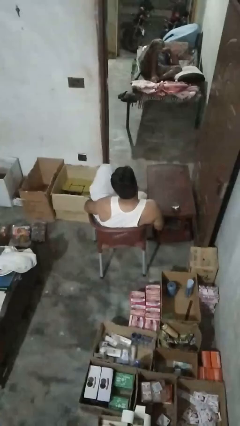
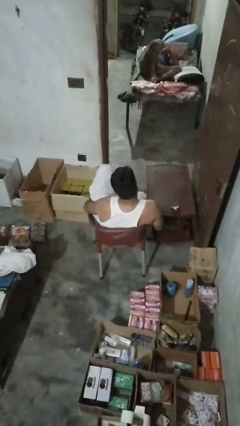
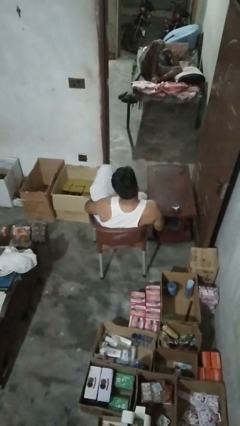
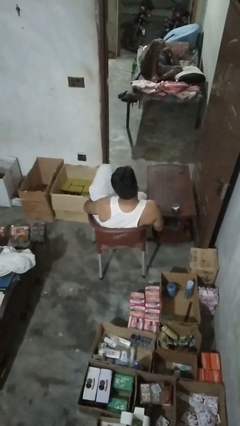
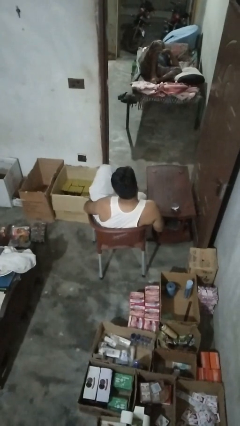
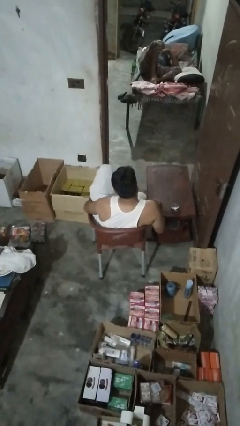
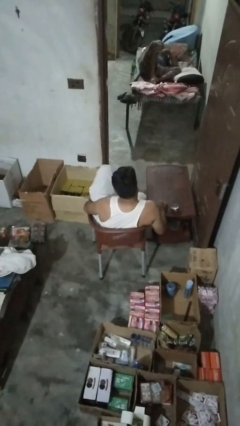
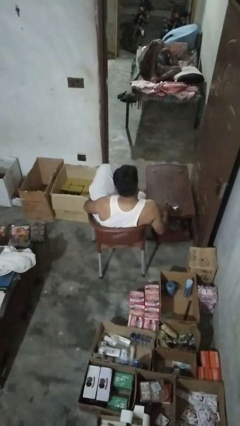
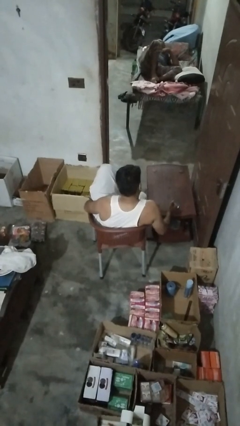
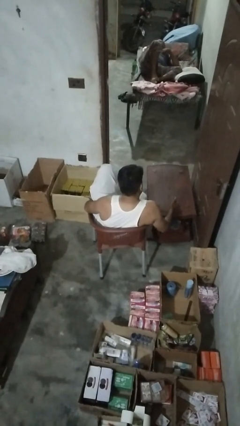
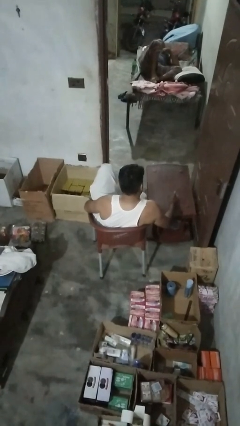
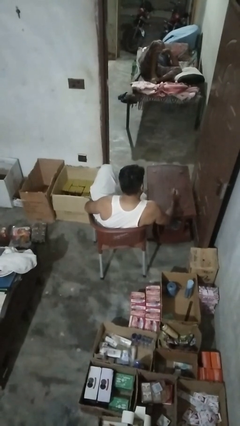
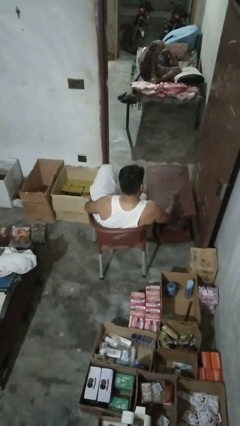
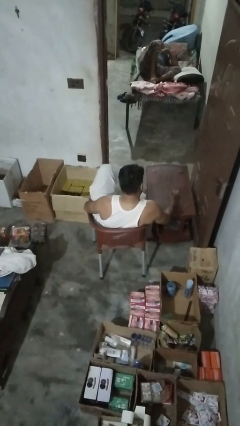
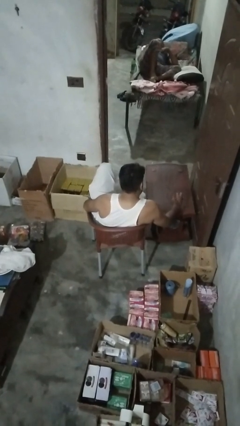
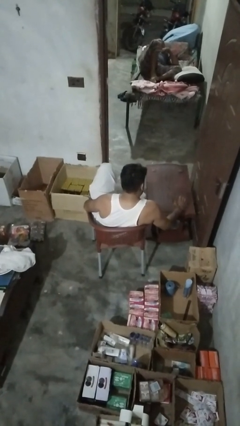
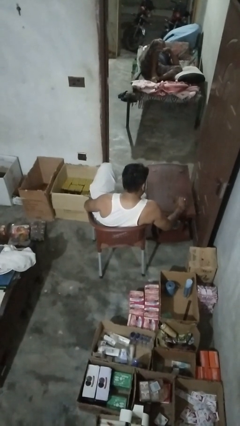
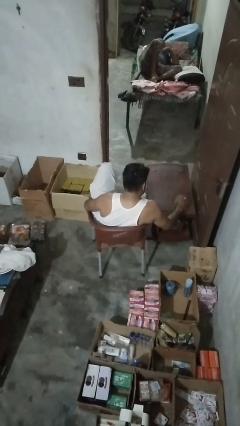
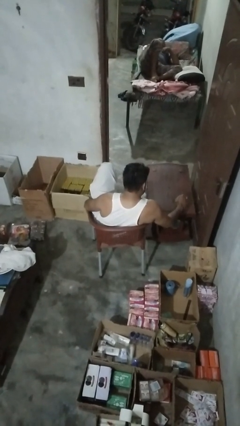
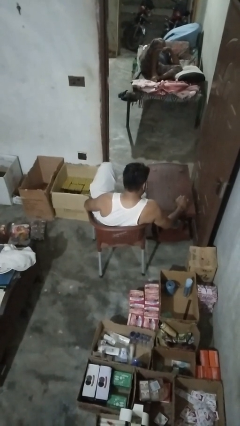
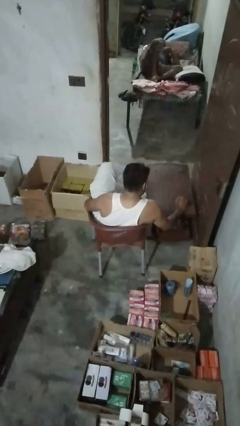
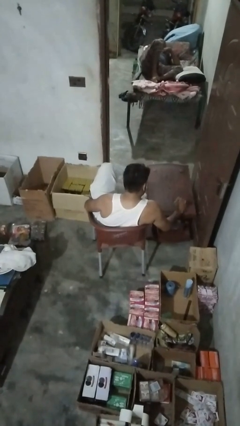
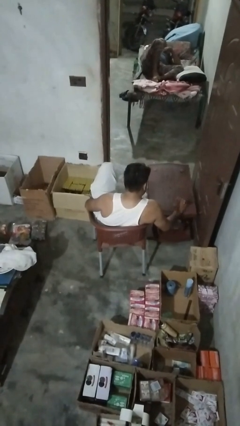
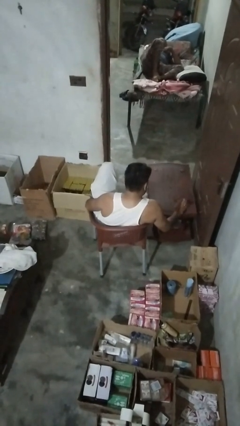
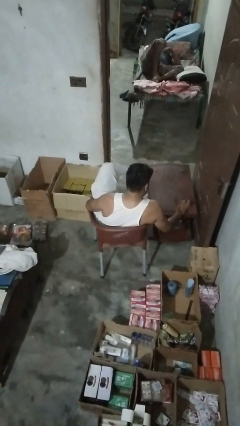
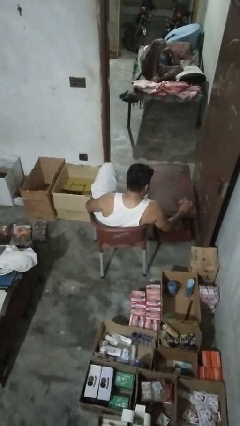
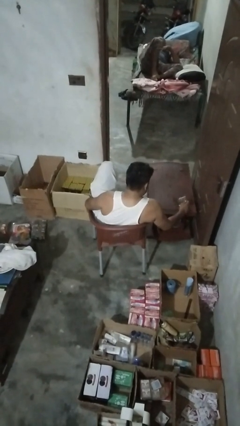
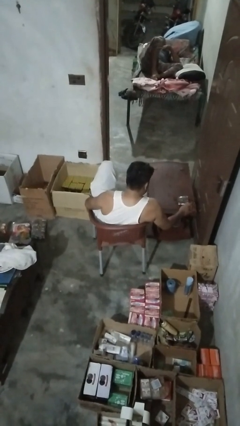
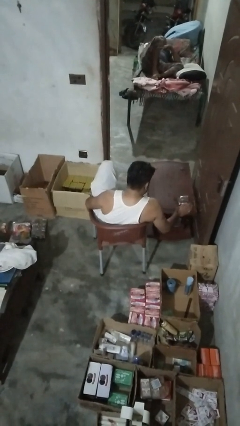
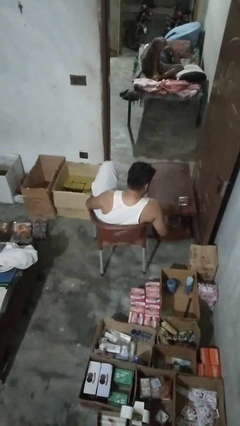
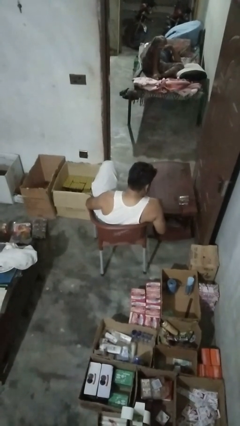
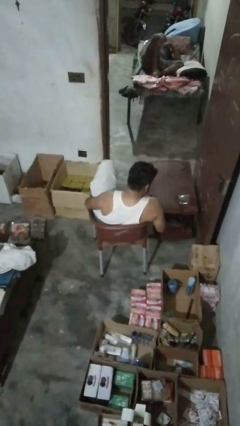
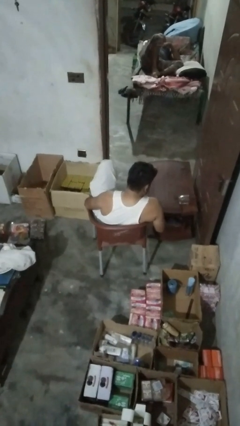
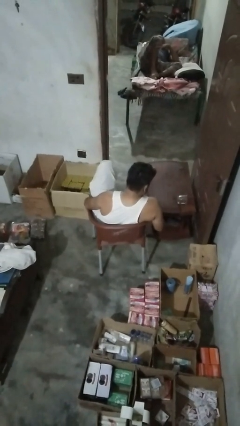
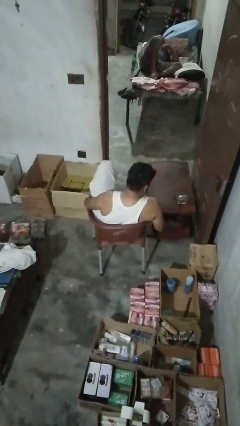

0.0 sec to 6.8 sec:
person spills on table

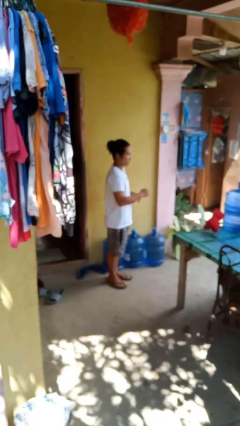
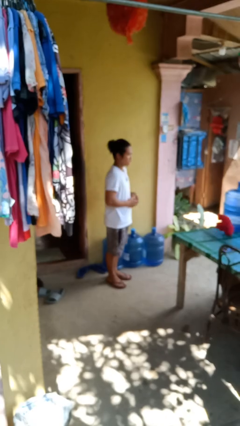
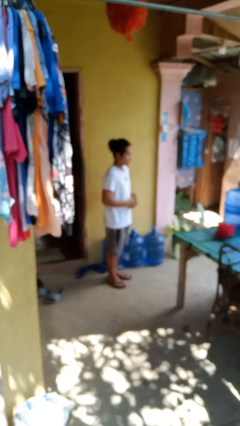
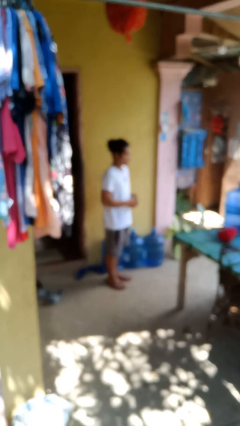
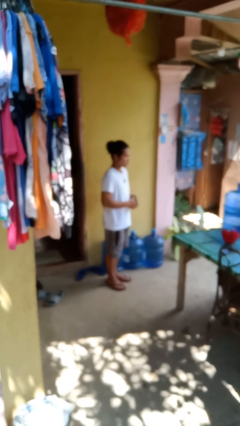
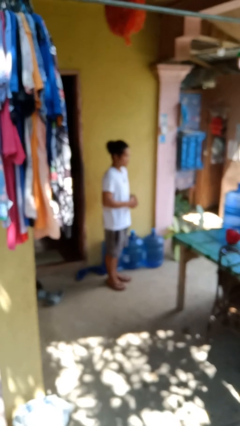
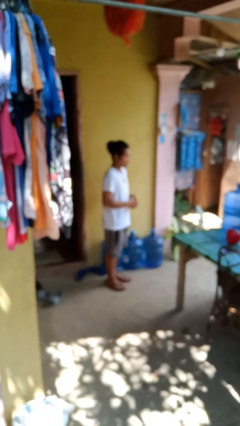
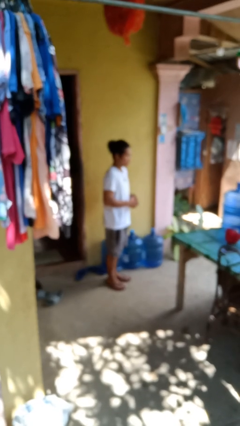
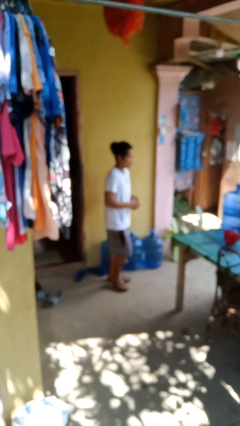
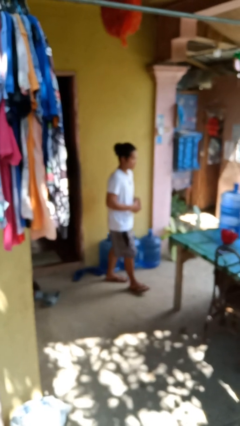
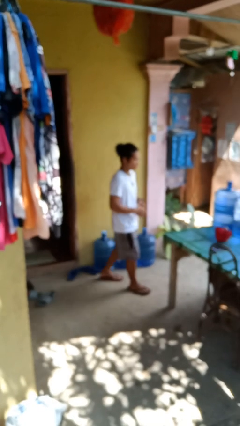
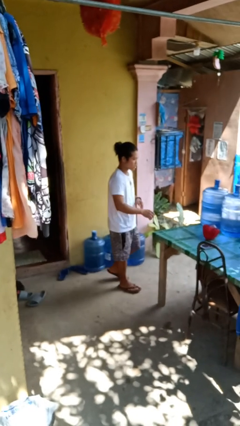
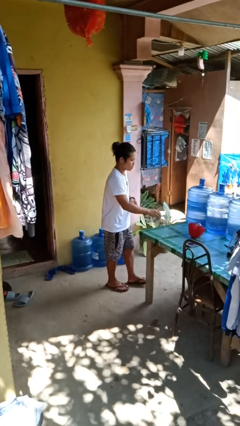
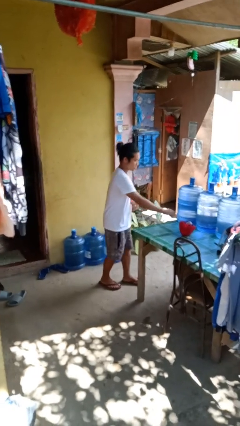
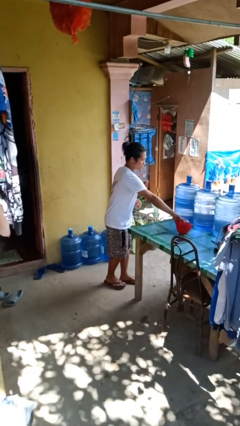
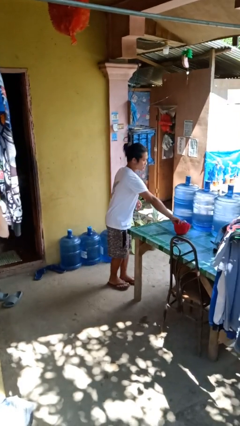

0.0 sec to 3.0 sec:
person throws object on table

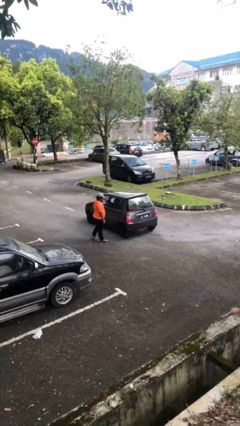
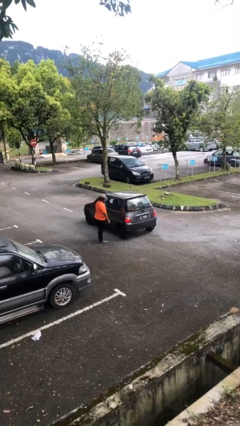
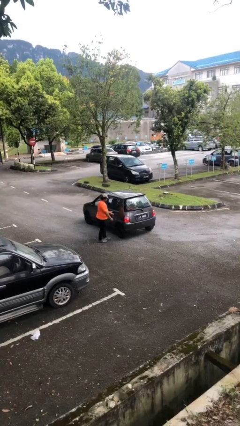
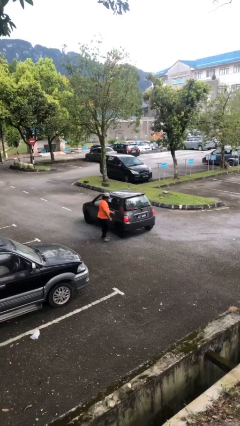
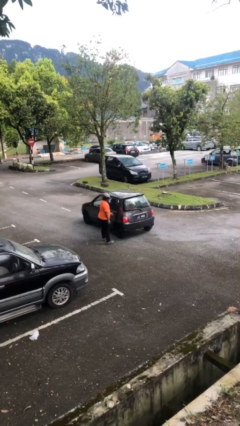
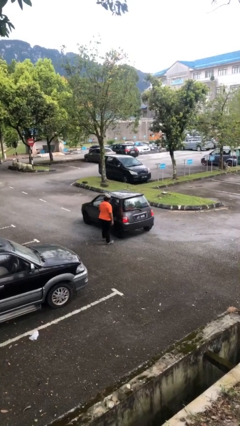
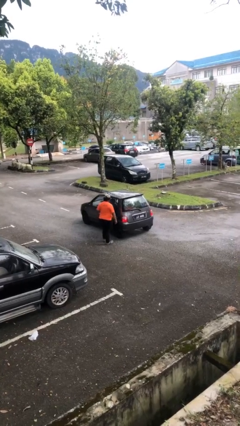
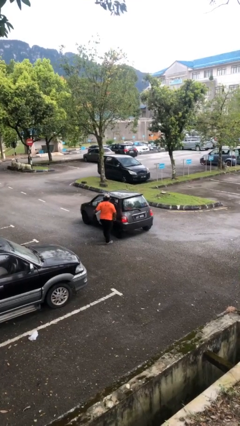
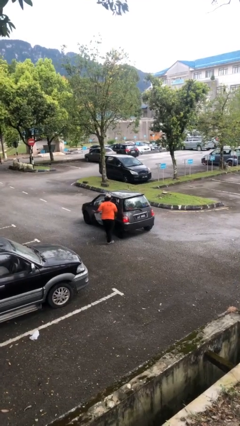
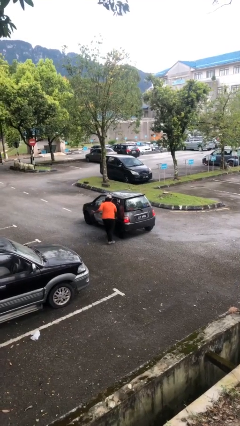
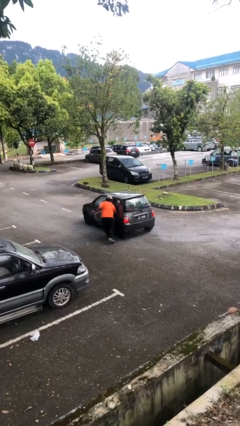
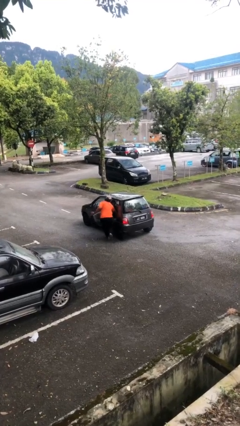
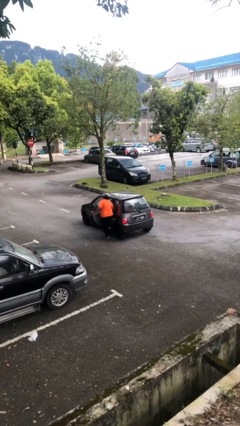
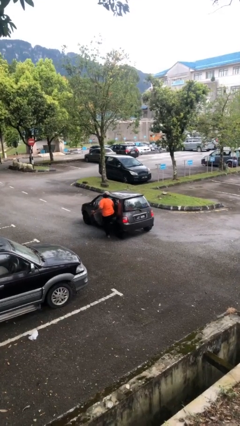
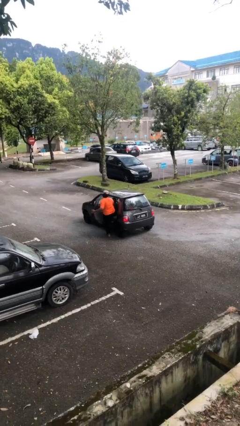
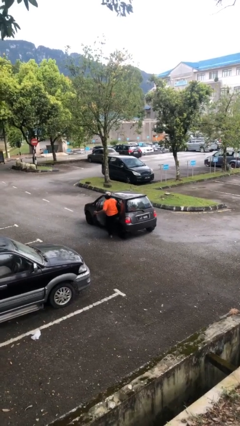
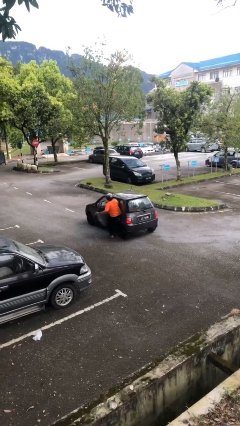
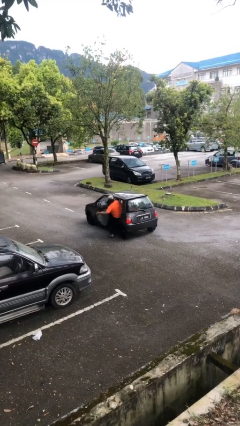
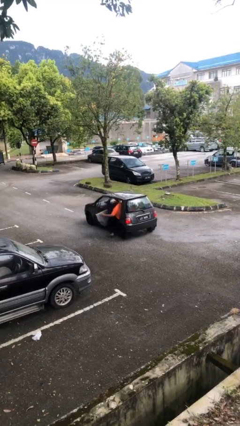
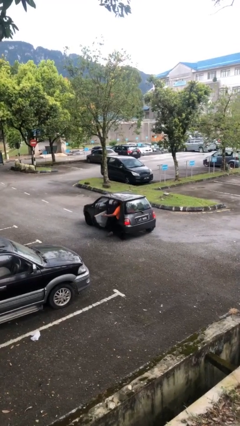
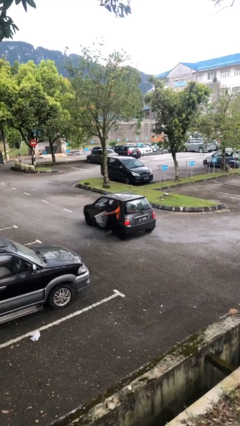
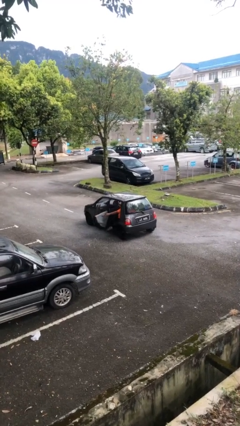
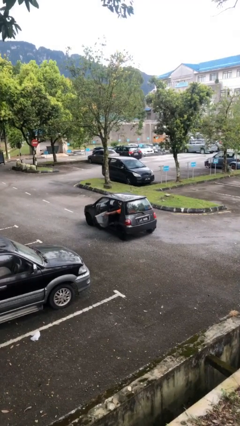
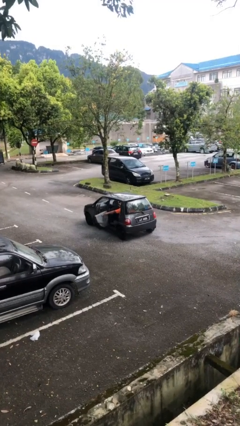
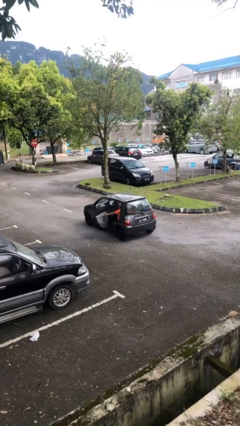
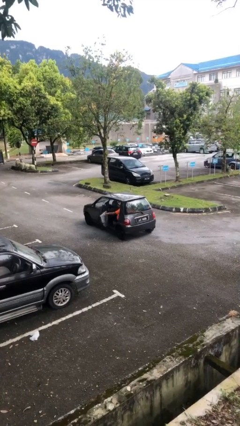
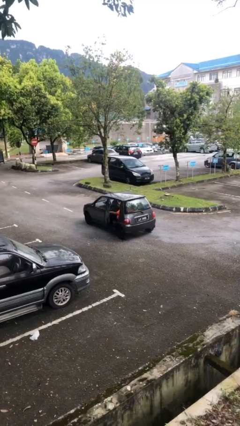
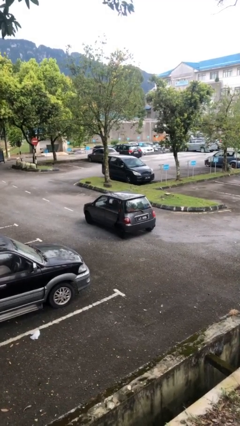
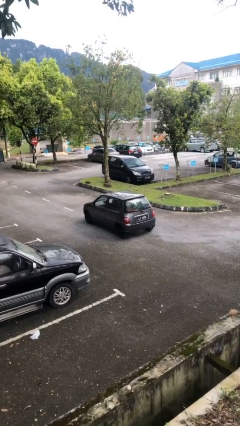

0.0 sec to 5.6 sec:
car picks up person

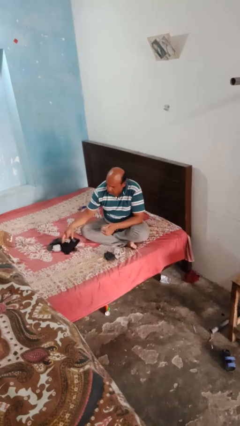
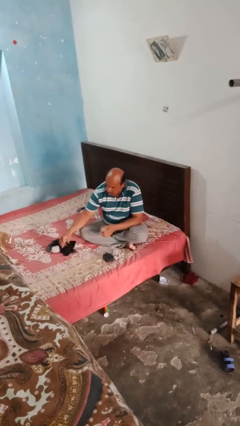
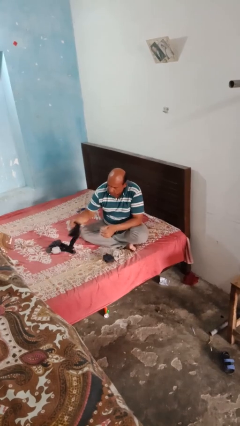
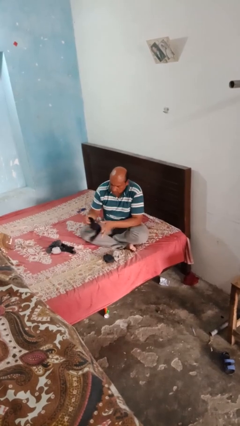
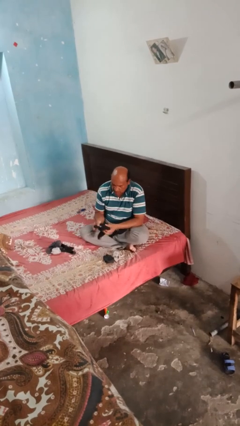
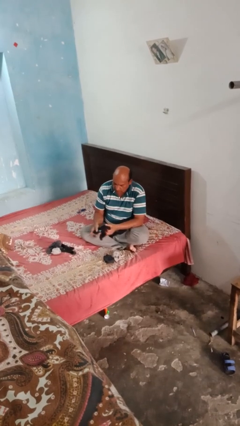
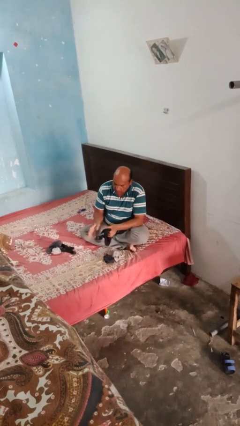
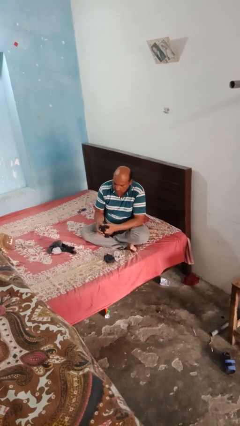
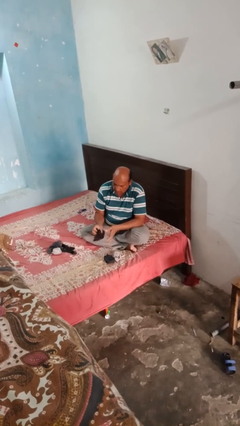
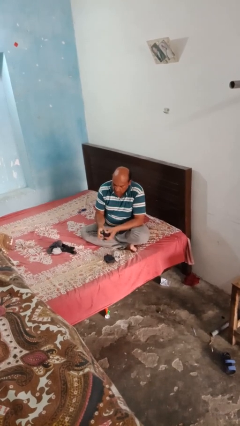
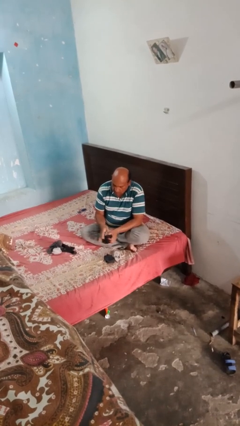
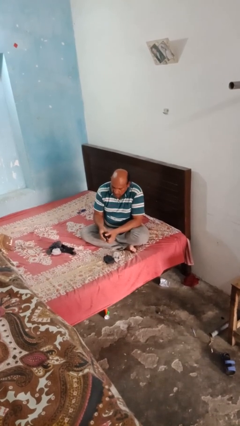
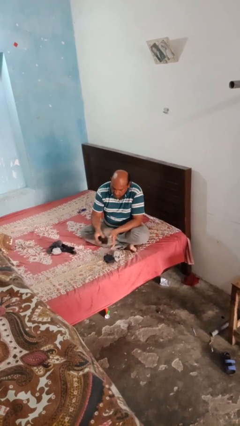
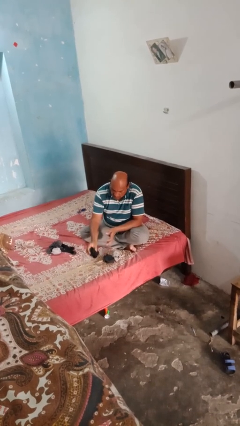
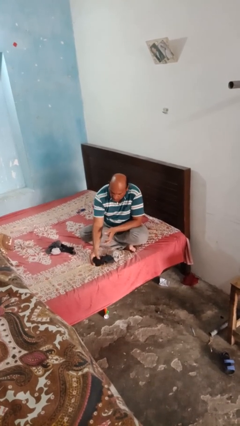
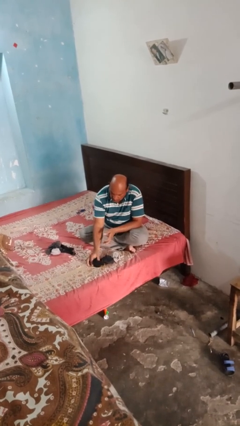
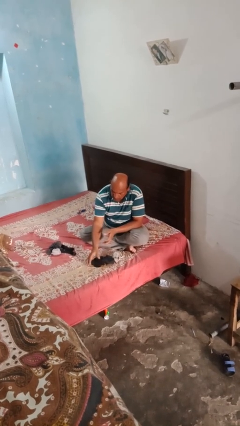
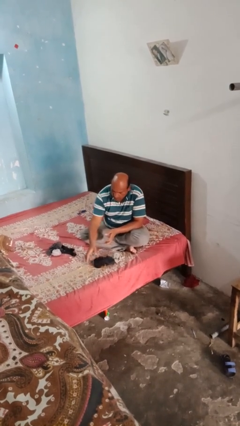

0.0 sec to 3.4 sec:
person folds socks
